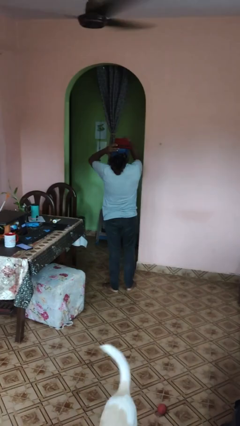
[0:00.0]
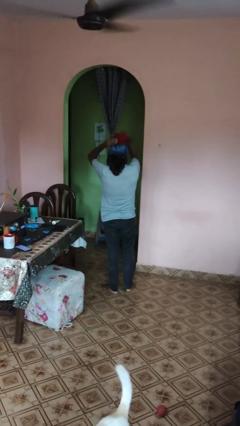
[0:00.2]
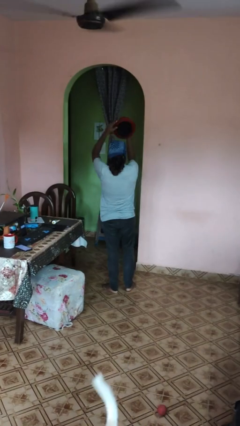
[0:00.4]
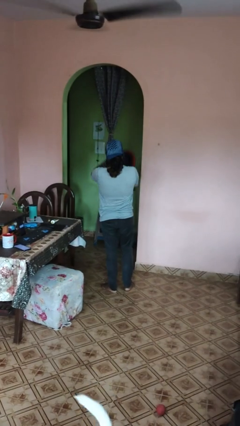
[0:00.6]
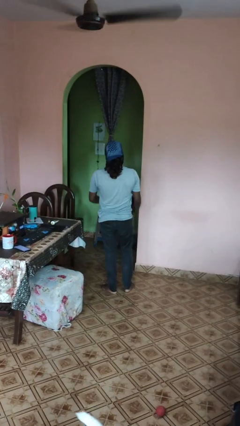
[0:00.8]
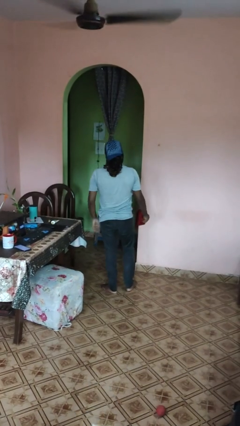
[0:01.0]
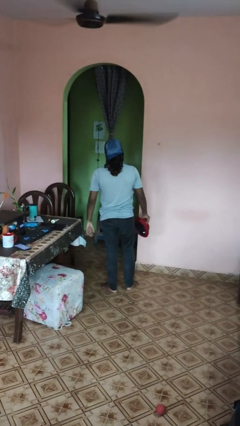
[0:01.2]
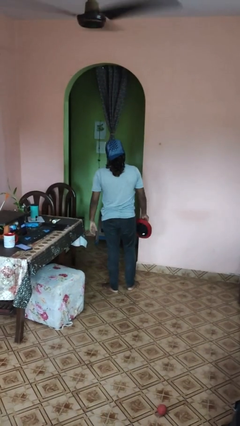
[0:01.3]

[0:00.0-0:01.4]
person takes off hat

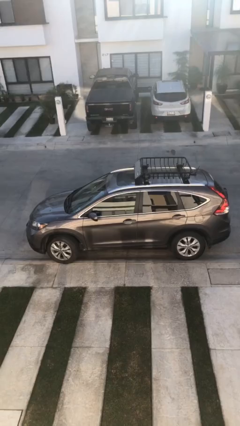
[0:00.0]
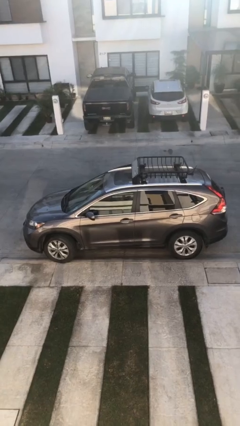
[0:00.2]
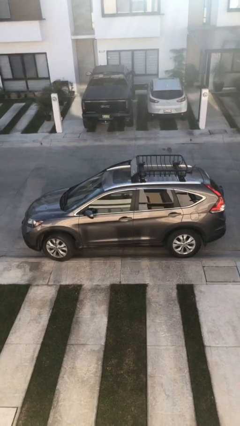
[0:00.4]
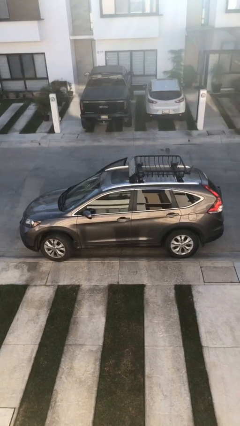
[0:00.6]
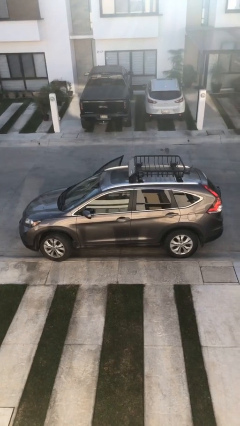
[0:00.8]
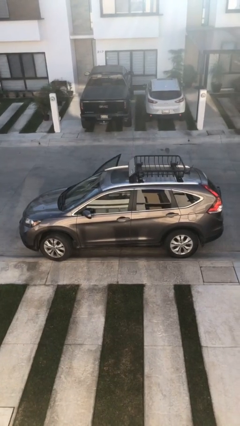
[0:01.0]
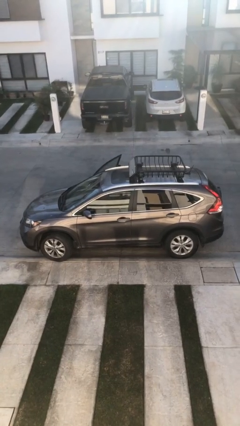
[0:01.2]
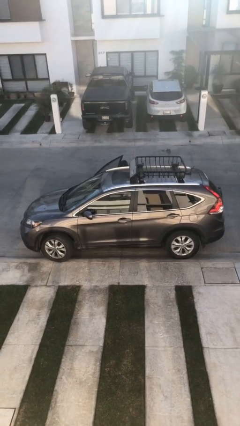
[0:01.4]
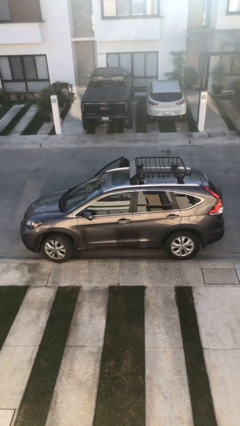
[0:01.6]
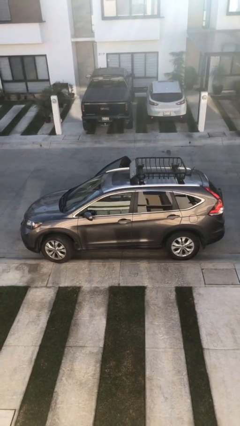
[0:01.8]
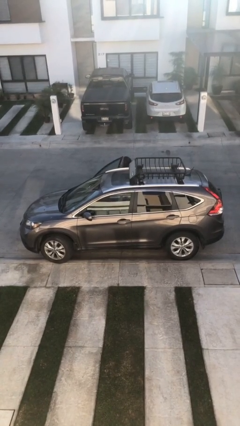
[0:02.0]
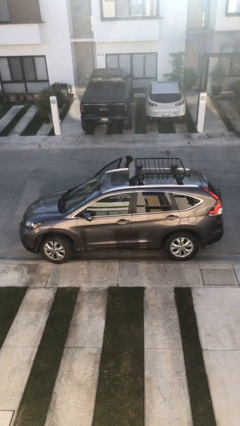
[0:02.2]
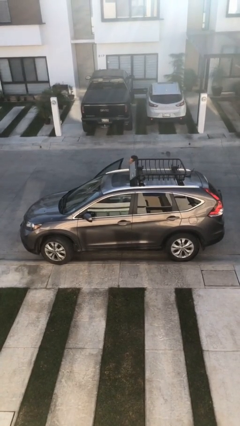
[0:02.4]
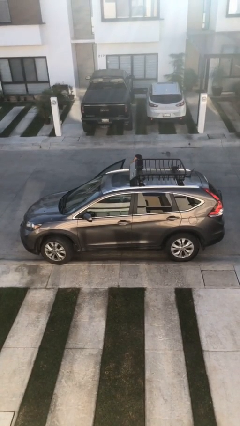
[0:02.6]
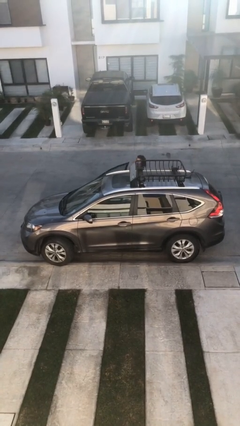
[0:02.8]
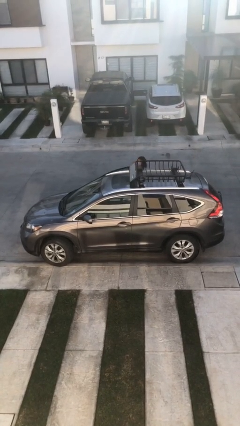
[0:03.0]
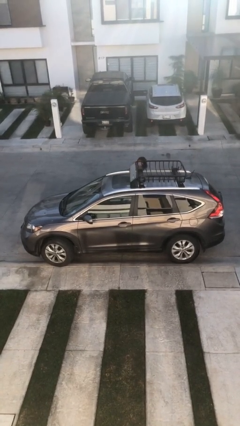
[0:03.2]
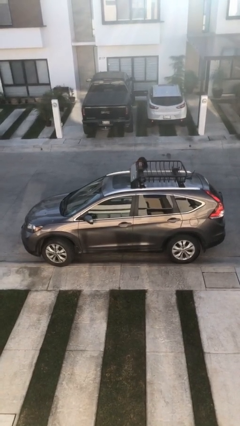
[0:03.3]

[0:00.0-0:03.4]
car drops off person

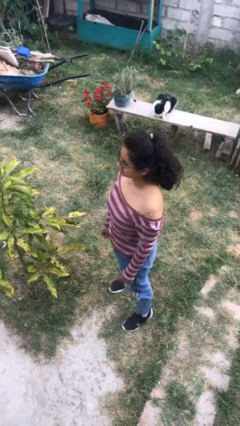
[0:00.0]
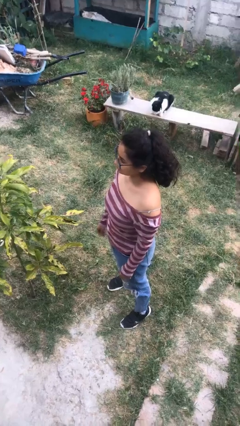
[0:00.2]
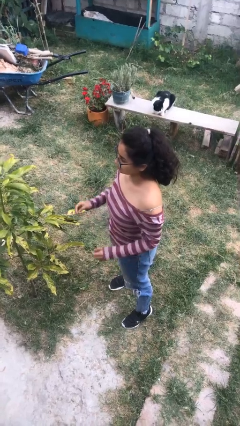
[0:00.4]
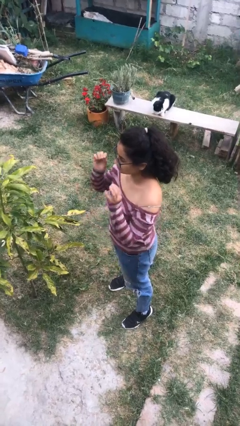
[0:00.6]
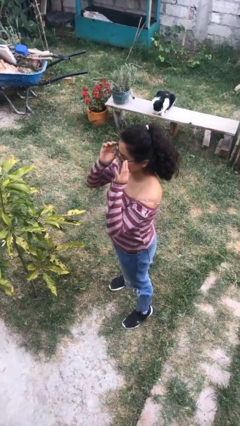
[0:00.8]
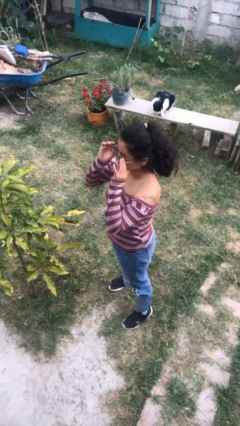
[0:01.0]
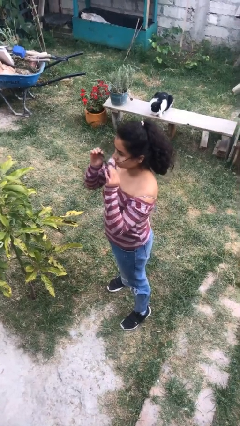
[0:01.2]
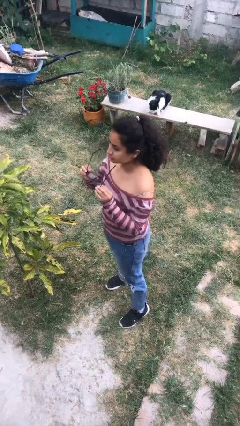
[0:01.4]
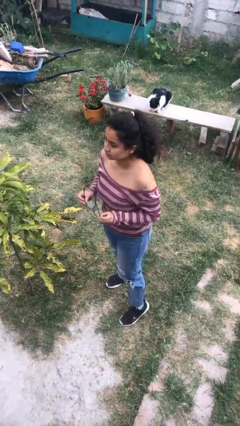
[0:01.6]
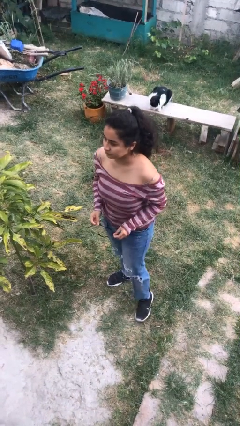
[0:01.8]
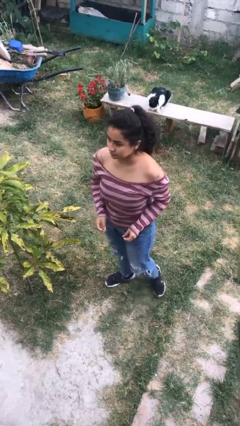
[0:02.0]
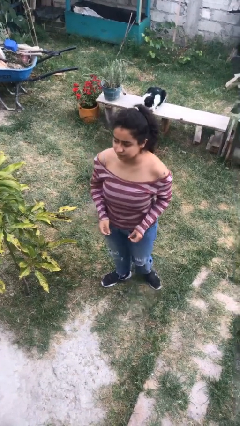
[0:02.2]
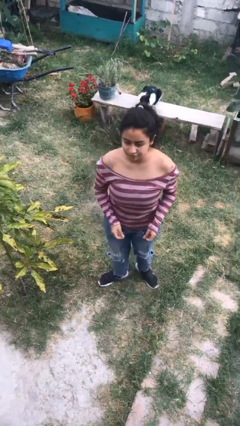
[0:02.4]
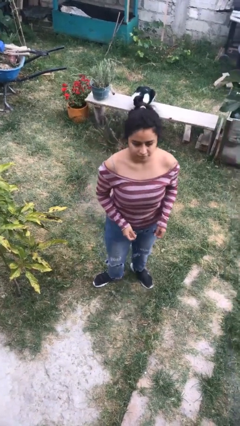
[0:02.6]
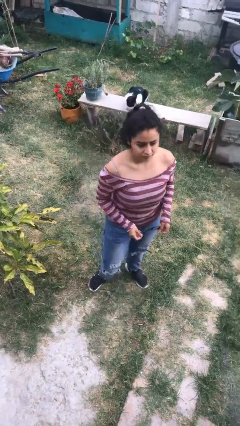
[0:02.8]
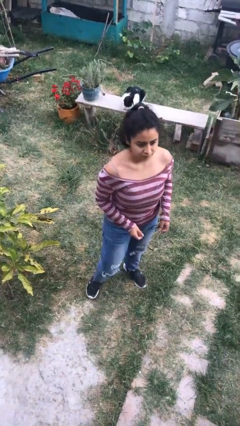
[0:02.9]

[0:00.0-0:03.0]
person takes off glasses

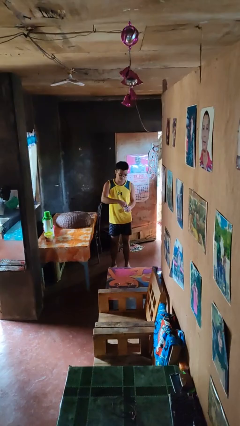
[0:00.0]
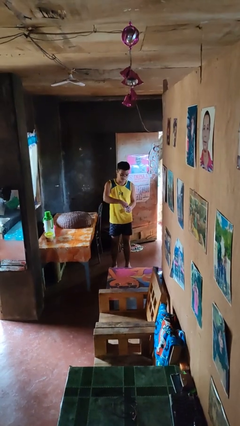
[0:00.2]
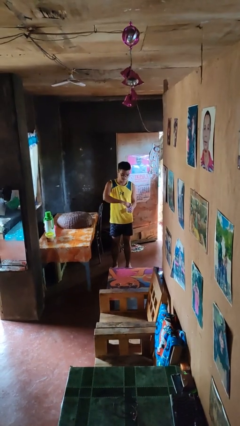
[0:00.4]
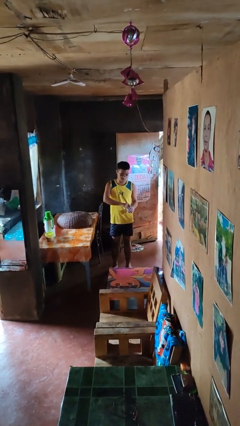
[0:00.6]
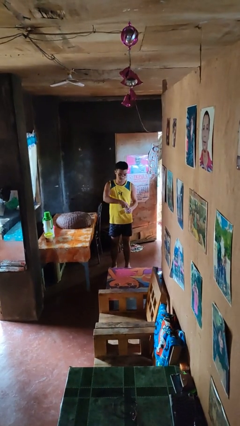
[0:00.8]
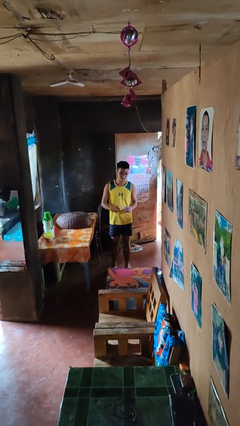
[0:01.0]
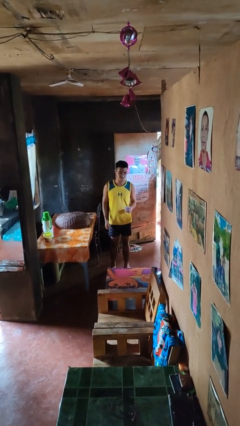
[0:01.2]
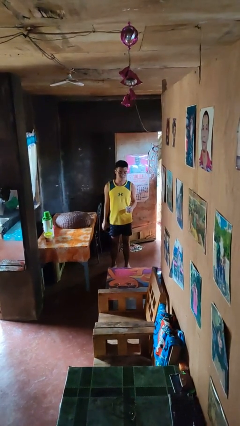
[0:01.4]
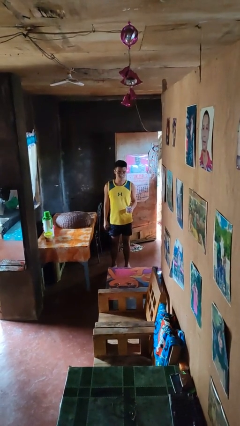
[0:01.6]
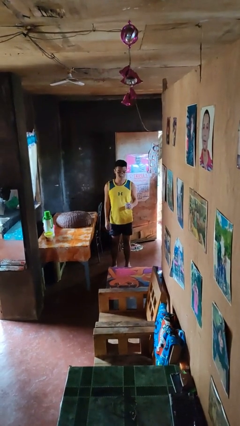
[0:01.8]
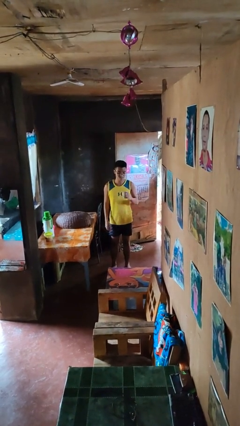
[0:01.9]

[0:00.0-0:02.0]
person opens beverage can

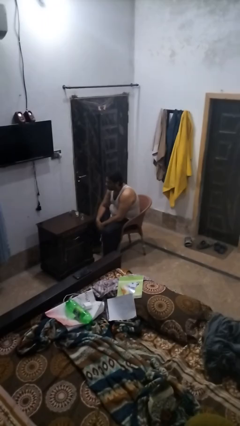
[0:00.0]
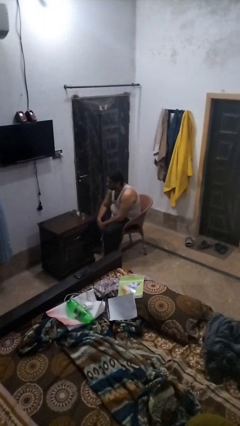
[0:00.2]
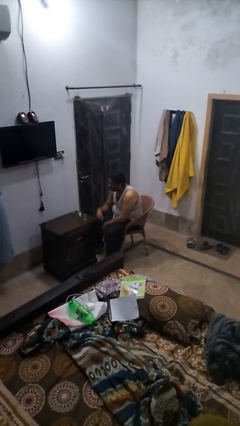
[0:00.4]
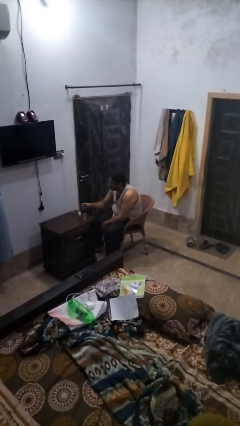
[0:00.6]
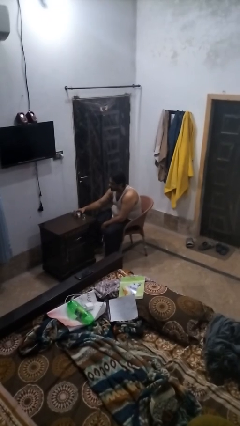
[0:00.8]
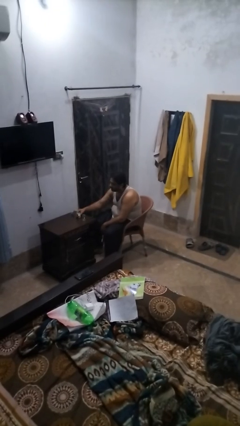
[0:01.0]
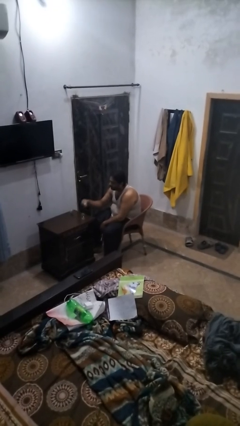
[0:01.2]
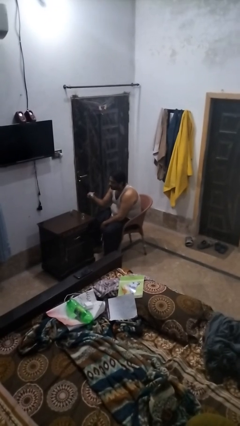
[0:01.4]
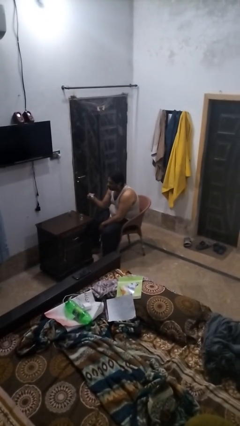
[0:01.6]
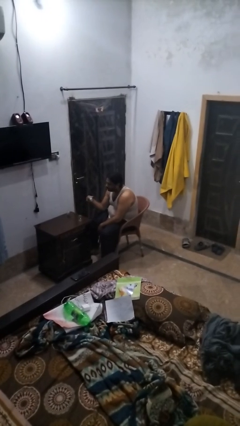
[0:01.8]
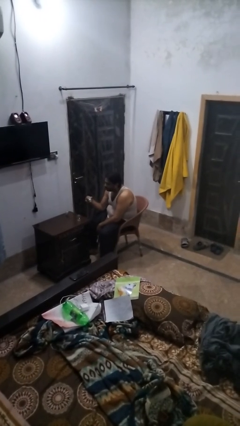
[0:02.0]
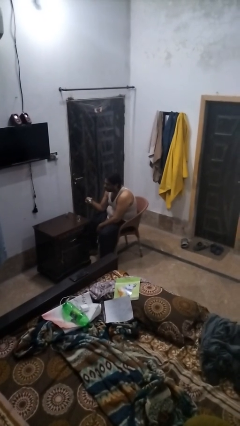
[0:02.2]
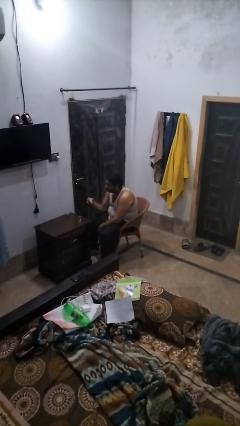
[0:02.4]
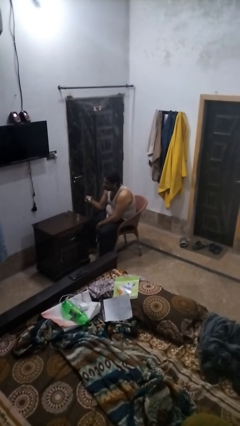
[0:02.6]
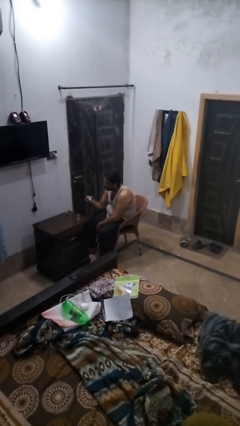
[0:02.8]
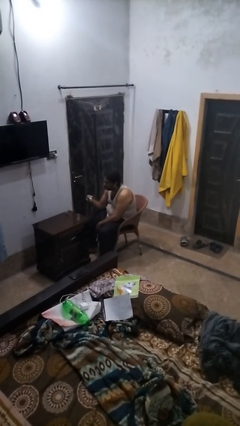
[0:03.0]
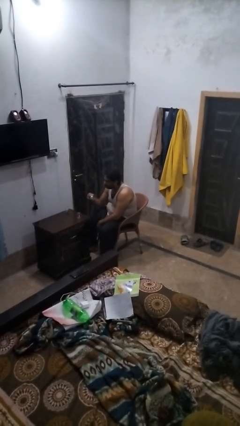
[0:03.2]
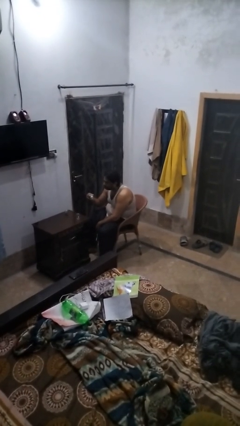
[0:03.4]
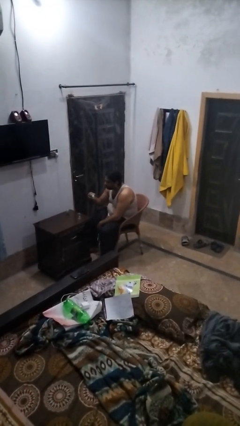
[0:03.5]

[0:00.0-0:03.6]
person picks up object from table

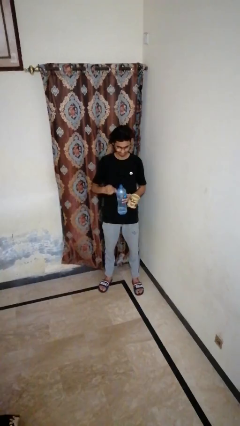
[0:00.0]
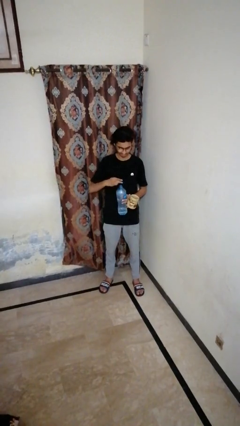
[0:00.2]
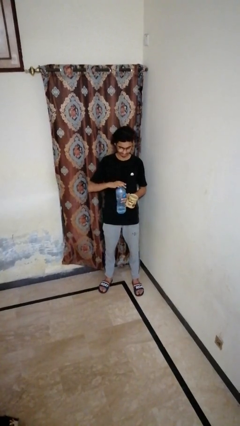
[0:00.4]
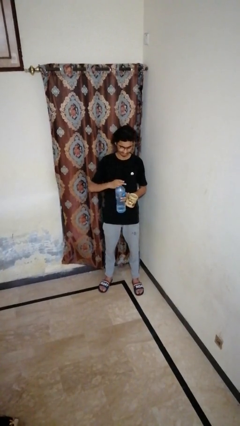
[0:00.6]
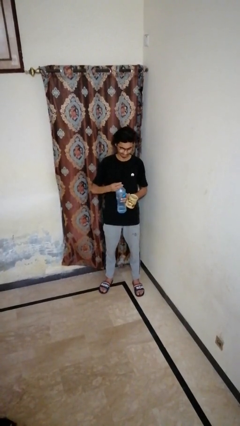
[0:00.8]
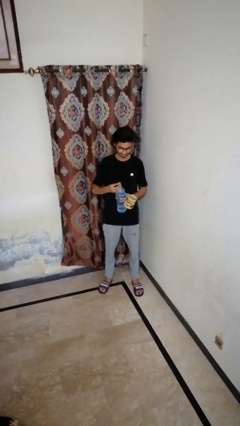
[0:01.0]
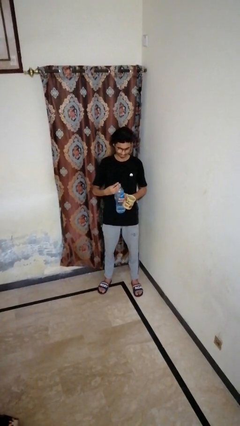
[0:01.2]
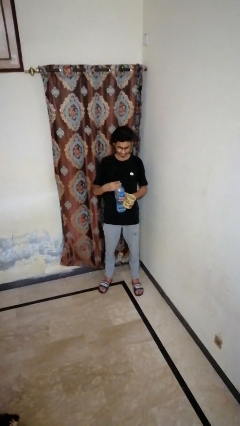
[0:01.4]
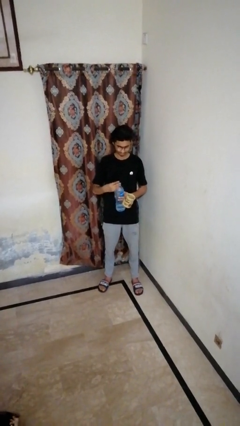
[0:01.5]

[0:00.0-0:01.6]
person screws lid to bottle

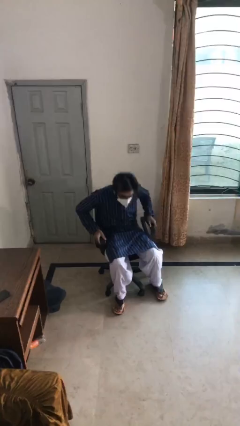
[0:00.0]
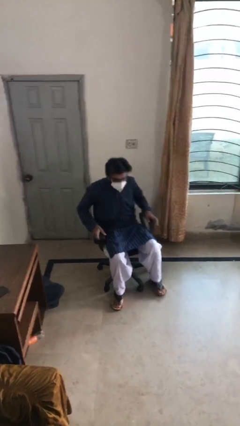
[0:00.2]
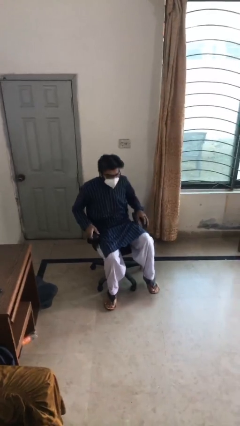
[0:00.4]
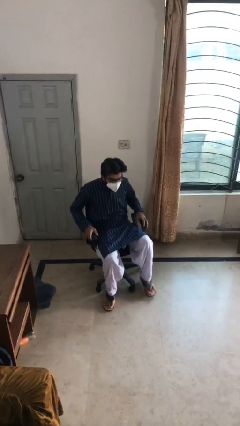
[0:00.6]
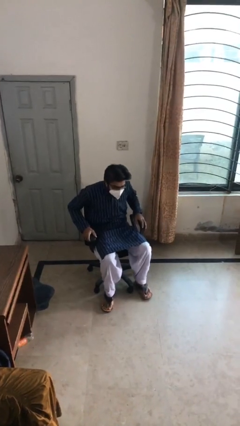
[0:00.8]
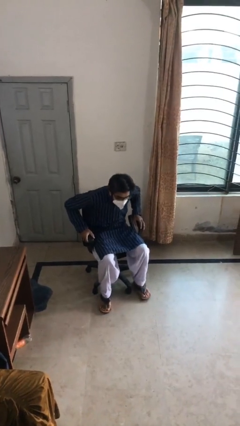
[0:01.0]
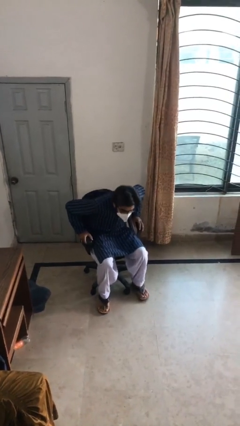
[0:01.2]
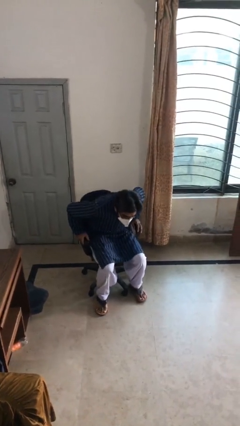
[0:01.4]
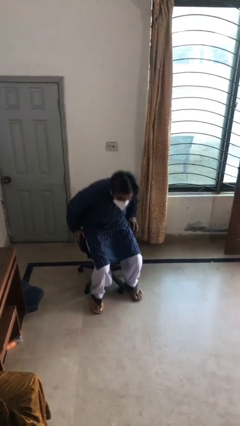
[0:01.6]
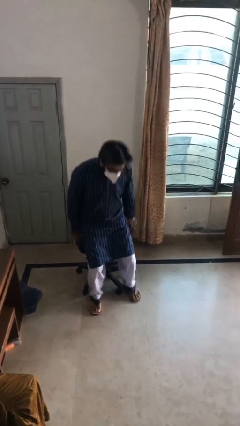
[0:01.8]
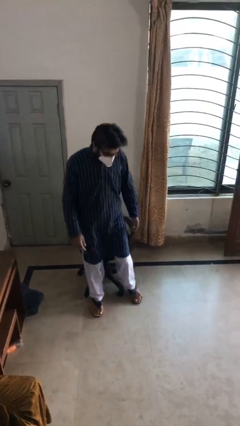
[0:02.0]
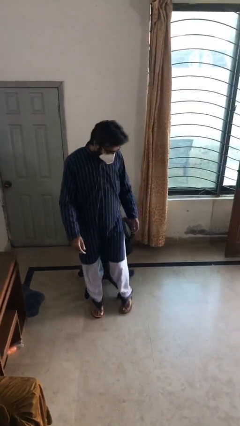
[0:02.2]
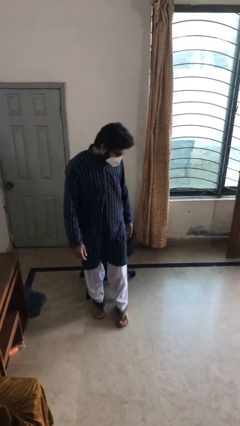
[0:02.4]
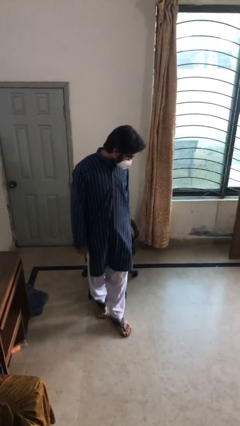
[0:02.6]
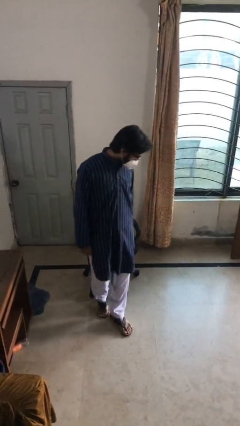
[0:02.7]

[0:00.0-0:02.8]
person stands up
